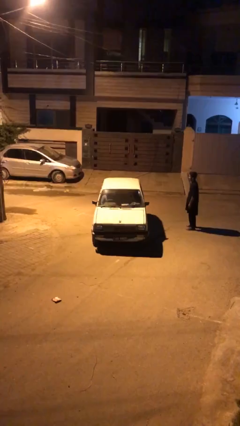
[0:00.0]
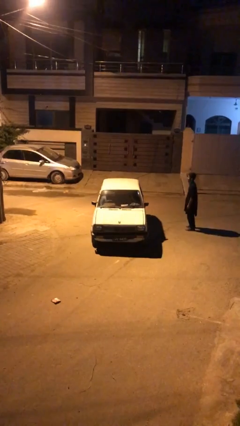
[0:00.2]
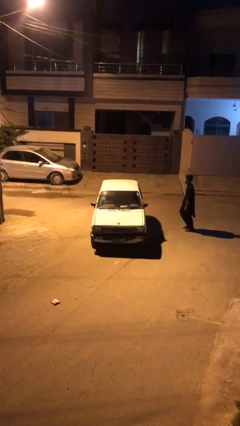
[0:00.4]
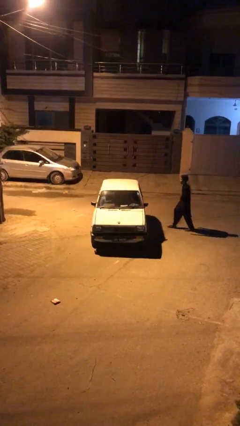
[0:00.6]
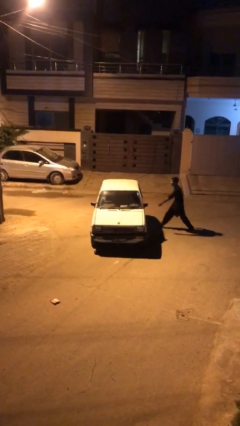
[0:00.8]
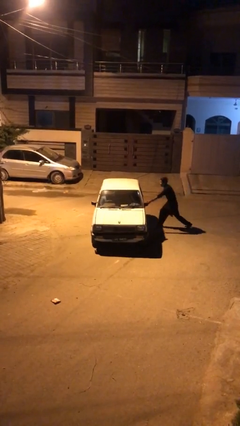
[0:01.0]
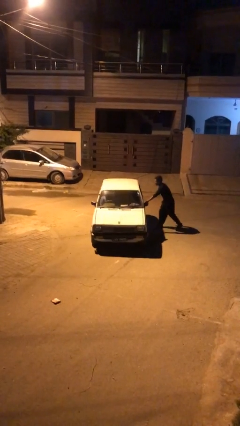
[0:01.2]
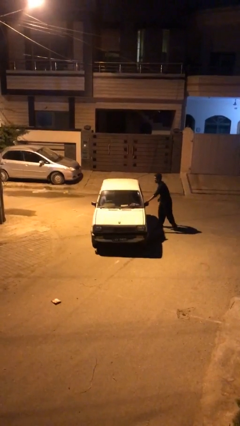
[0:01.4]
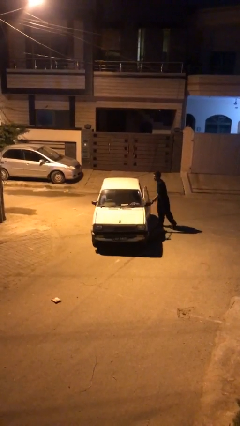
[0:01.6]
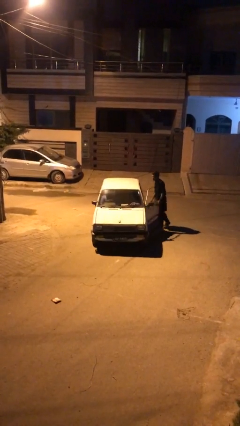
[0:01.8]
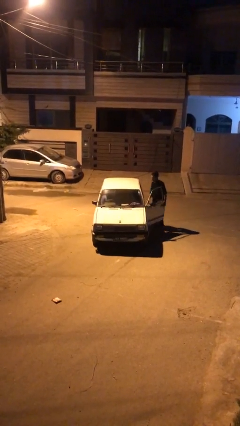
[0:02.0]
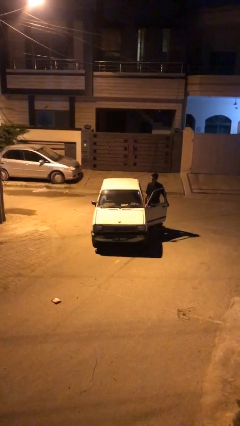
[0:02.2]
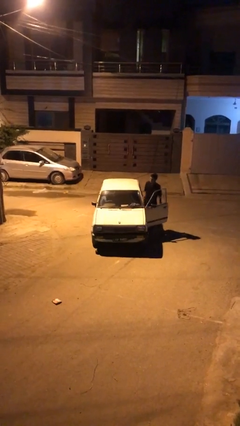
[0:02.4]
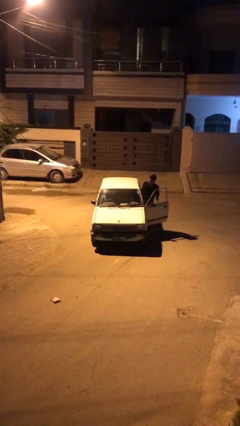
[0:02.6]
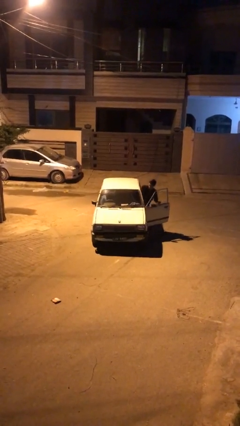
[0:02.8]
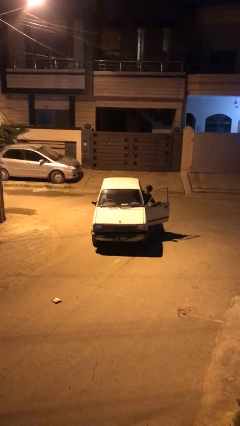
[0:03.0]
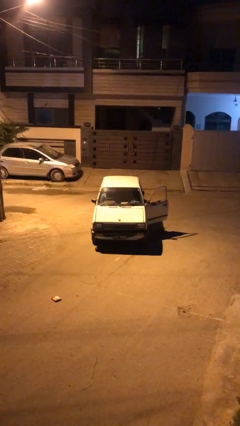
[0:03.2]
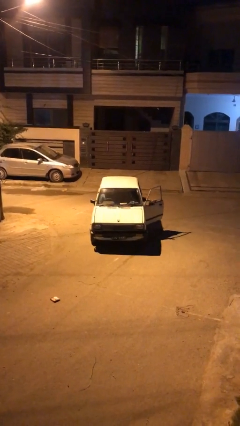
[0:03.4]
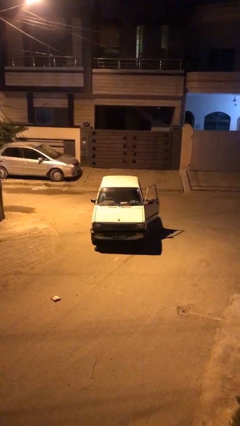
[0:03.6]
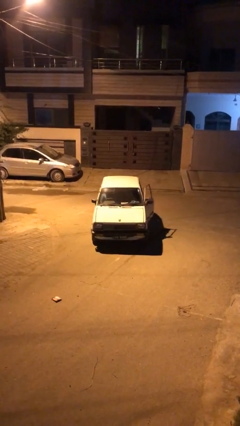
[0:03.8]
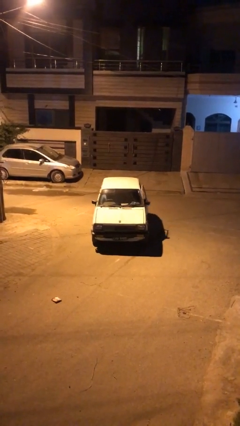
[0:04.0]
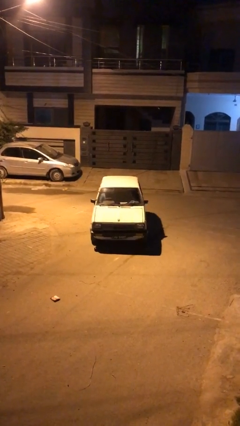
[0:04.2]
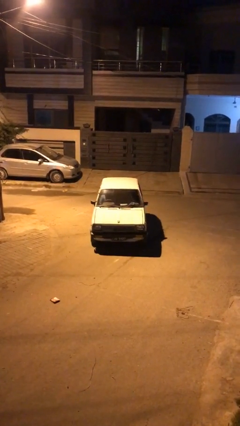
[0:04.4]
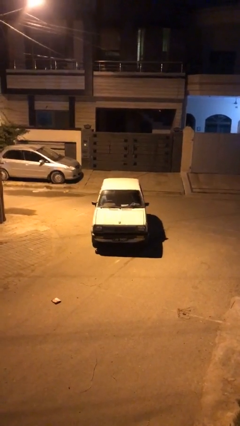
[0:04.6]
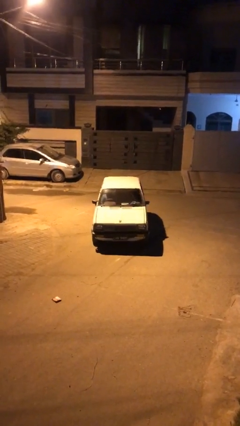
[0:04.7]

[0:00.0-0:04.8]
car picks up person

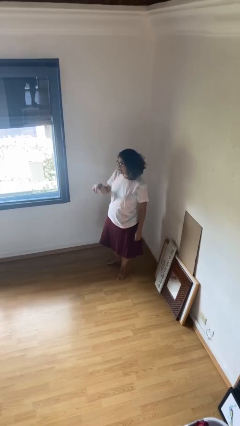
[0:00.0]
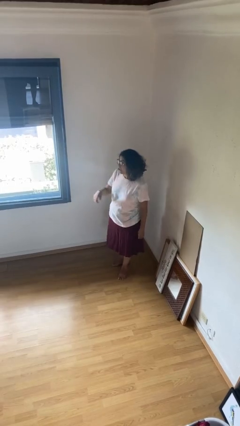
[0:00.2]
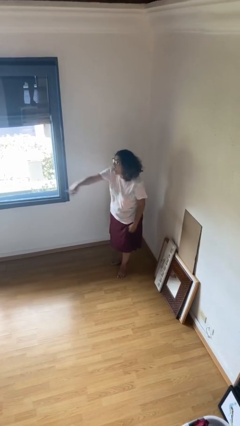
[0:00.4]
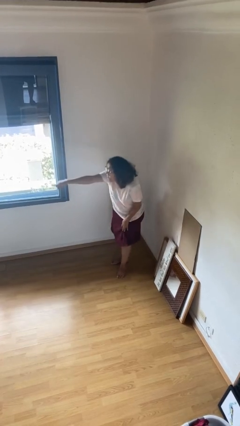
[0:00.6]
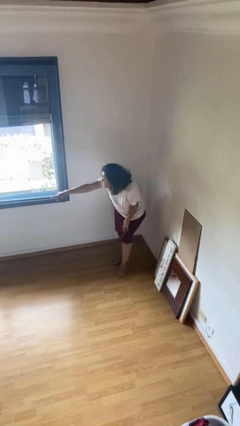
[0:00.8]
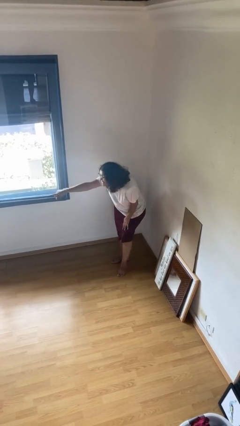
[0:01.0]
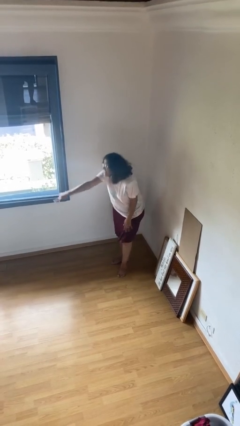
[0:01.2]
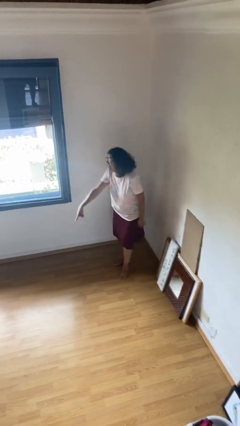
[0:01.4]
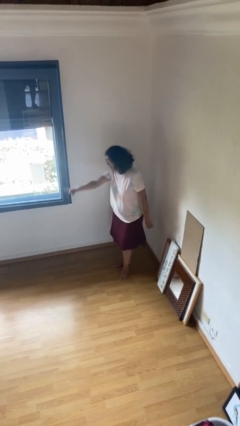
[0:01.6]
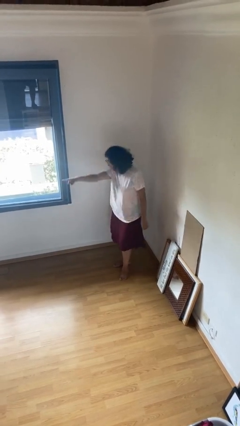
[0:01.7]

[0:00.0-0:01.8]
person points at person

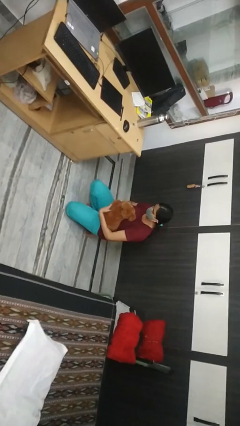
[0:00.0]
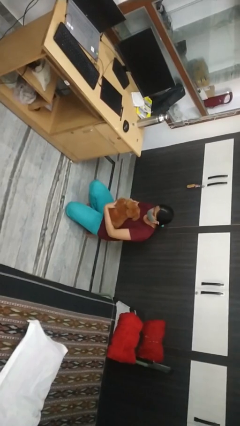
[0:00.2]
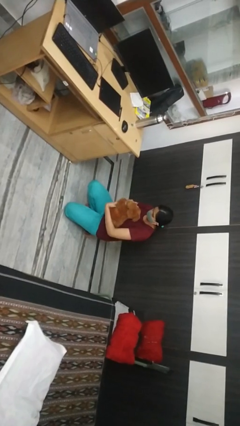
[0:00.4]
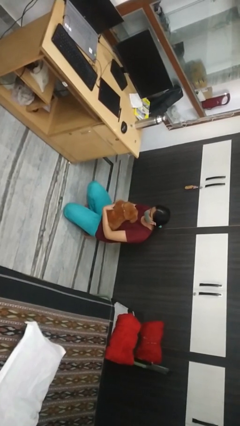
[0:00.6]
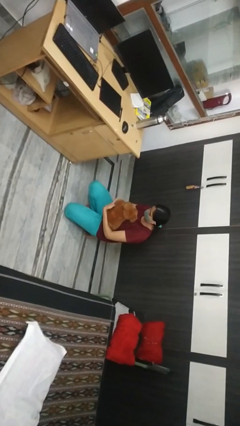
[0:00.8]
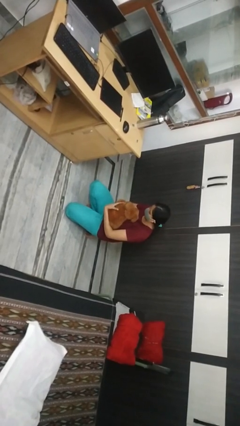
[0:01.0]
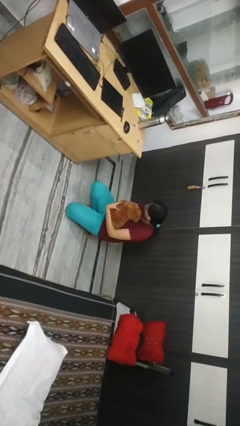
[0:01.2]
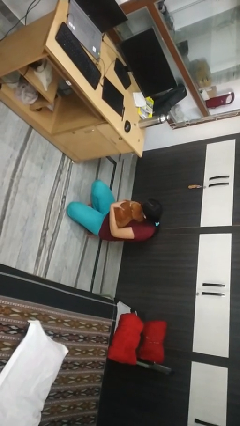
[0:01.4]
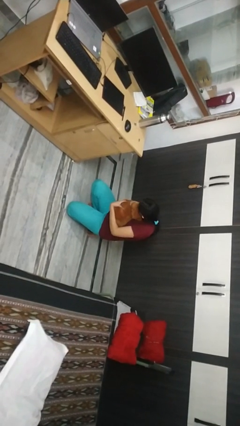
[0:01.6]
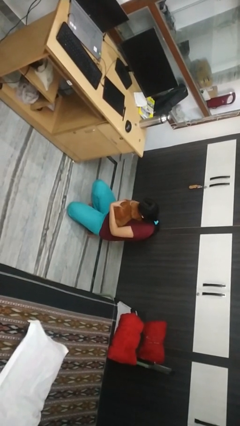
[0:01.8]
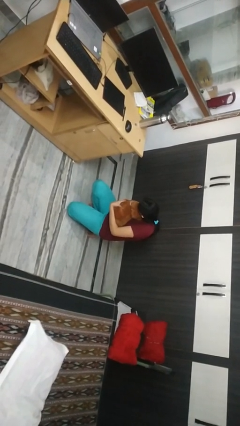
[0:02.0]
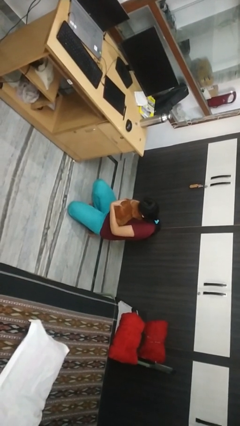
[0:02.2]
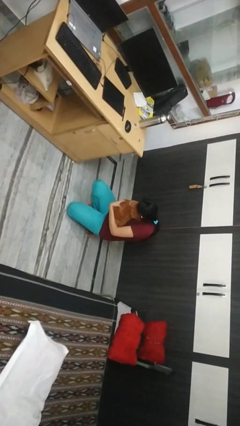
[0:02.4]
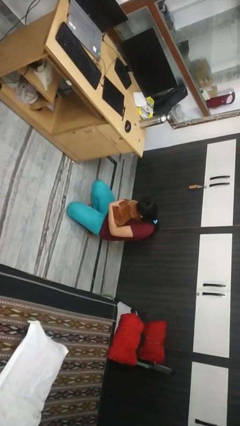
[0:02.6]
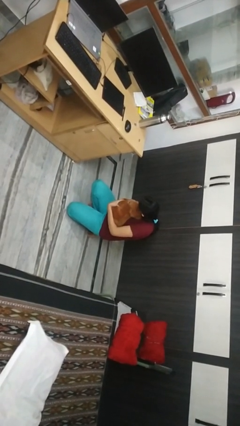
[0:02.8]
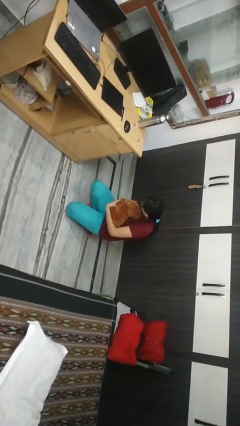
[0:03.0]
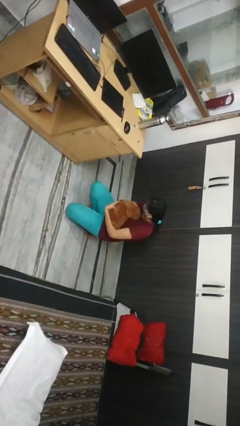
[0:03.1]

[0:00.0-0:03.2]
person hugs dog

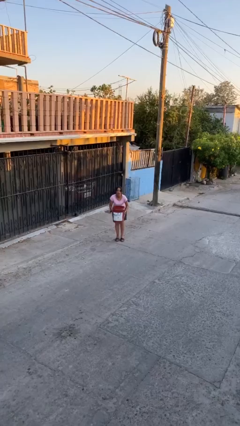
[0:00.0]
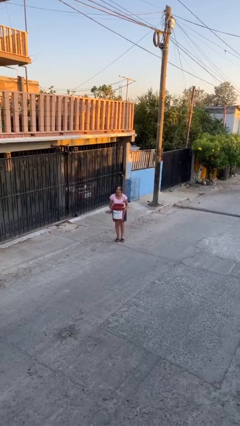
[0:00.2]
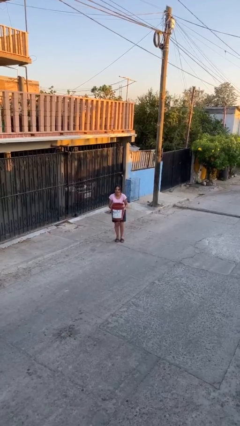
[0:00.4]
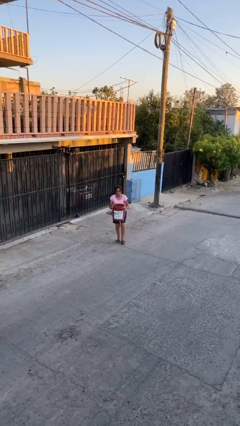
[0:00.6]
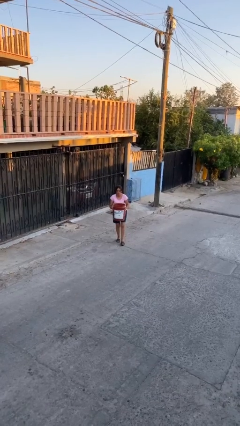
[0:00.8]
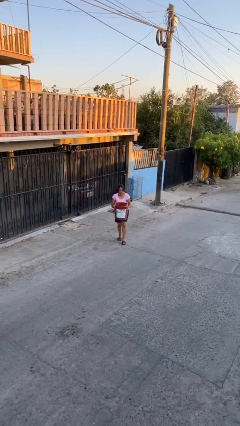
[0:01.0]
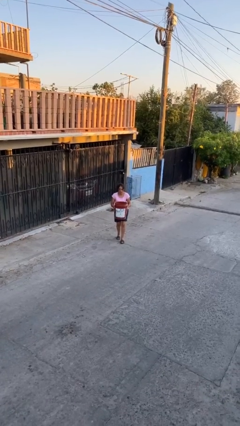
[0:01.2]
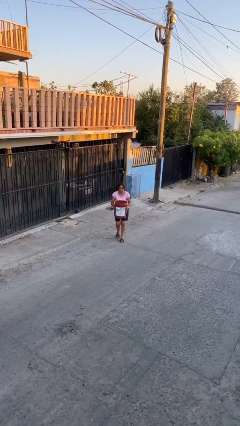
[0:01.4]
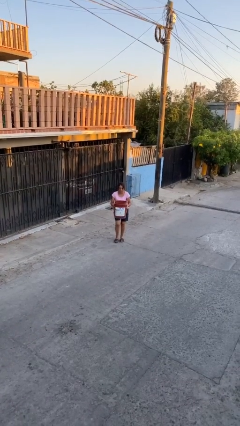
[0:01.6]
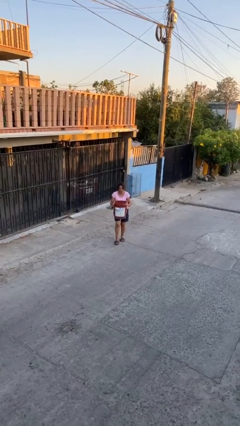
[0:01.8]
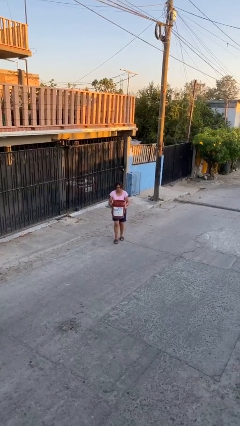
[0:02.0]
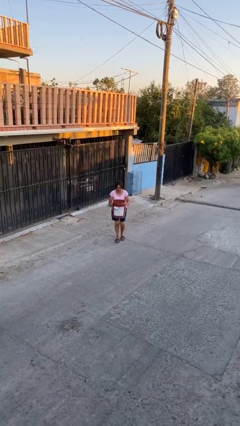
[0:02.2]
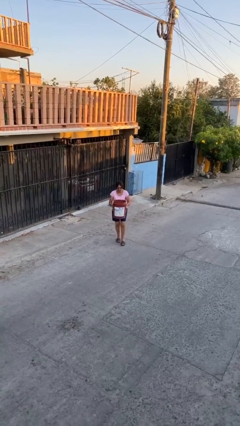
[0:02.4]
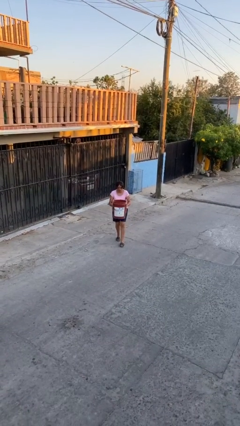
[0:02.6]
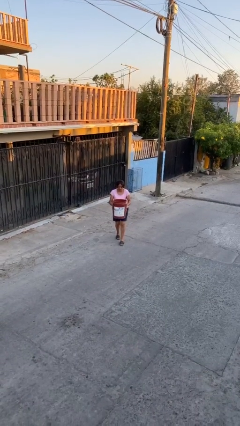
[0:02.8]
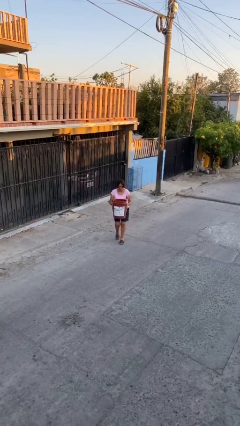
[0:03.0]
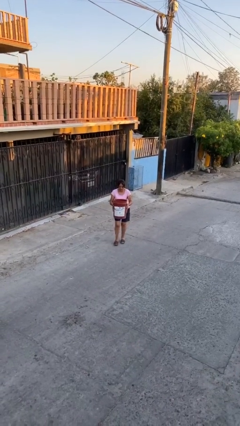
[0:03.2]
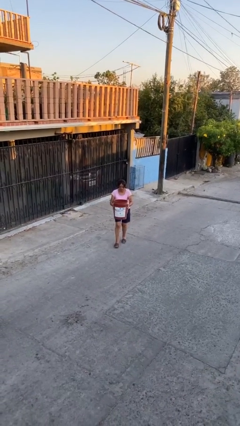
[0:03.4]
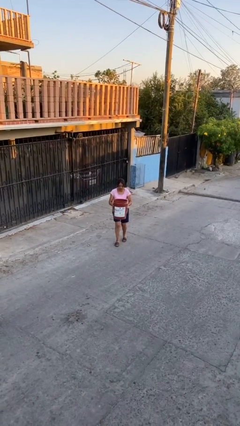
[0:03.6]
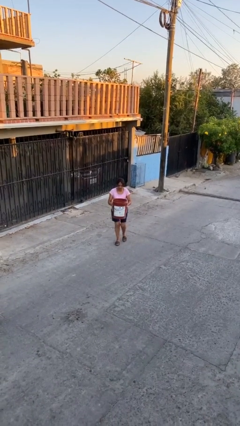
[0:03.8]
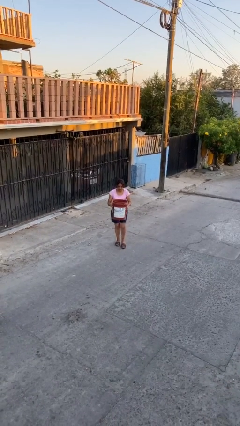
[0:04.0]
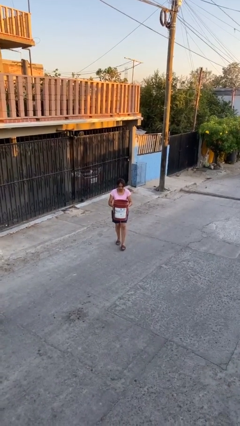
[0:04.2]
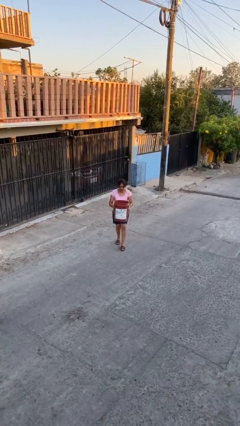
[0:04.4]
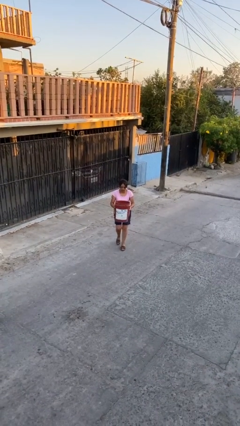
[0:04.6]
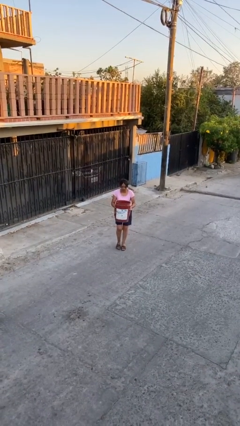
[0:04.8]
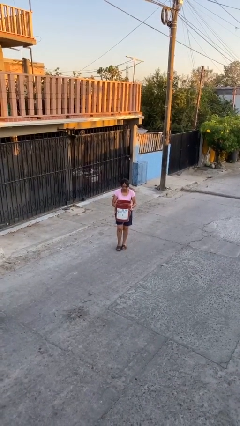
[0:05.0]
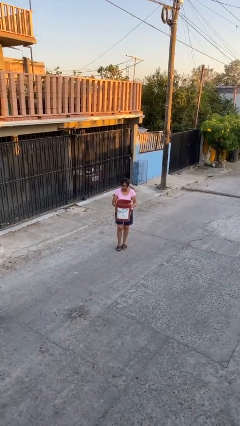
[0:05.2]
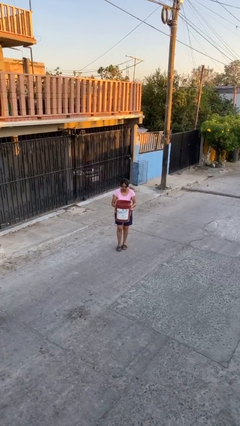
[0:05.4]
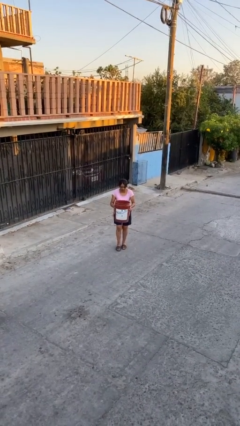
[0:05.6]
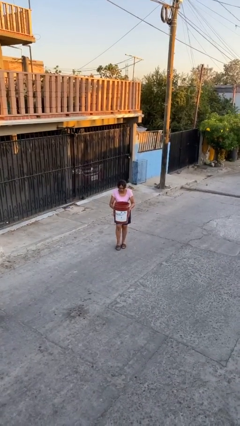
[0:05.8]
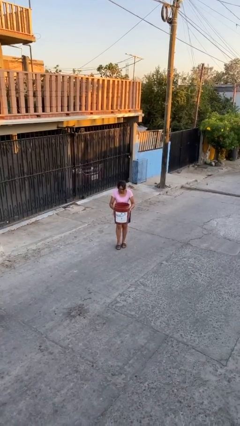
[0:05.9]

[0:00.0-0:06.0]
person carries heavy object

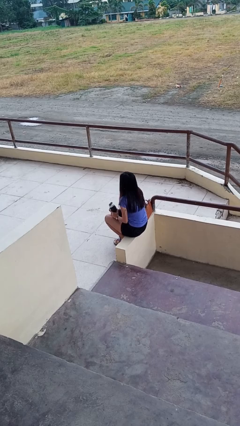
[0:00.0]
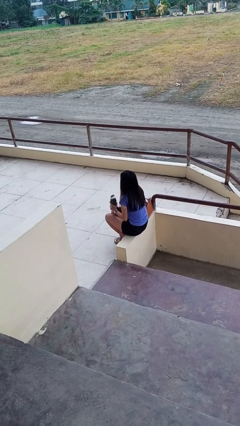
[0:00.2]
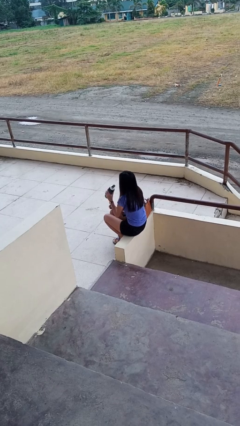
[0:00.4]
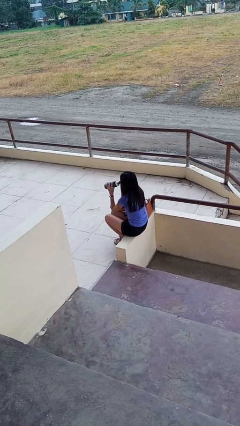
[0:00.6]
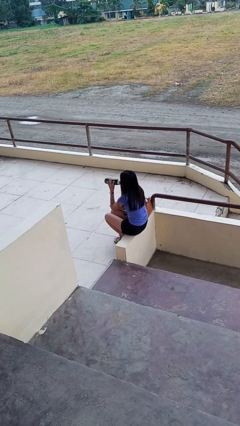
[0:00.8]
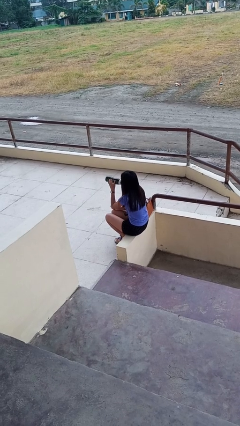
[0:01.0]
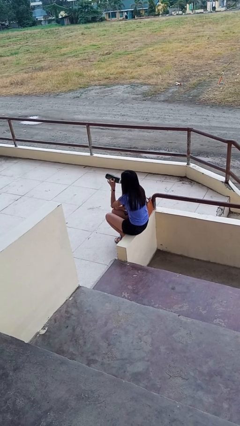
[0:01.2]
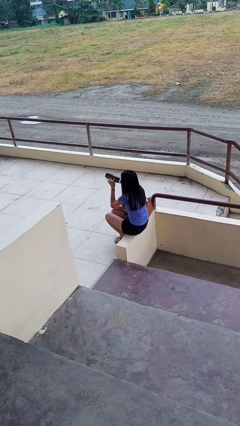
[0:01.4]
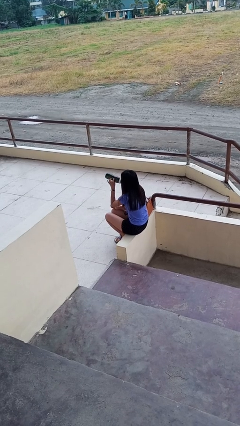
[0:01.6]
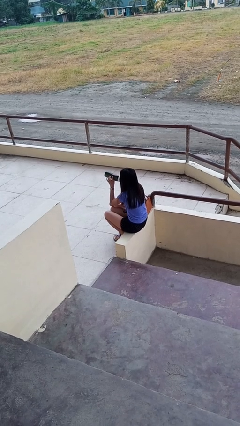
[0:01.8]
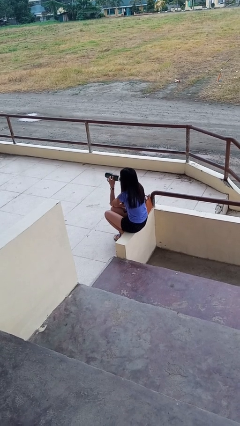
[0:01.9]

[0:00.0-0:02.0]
person drinks from bottle

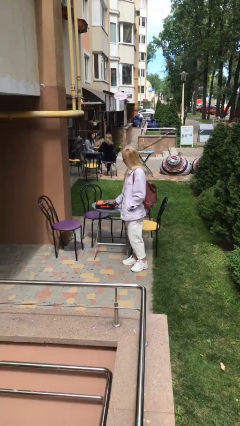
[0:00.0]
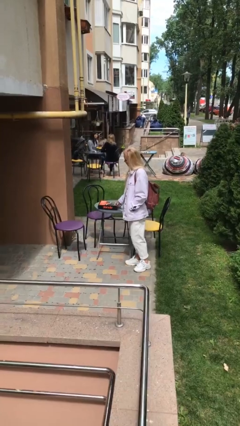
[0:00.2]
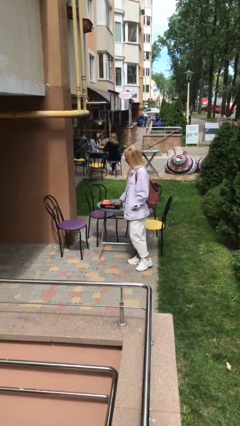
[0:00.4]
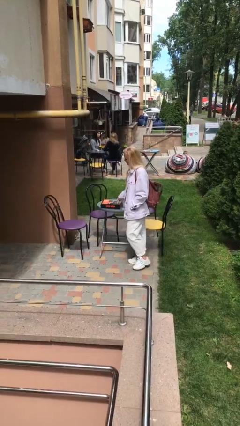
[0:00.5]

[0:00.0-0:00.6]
person puts down object on table
